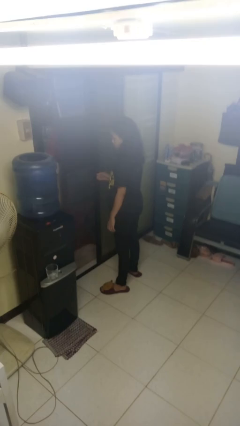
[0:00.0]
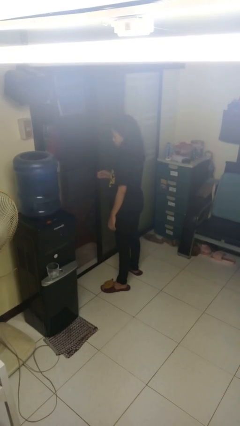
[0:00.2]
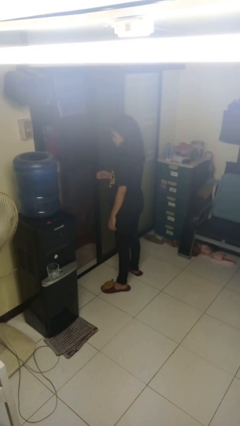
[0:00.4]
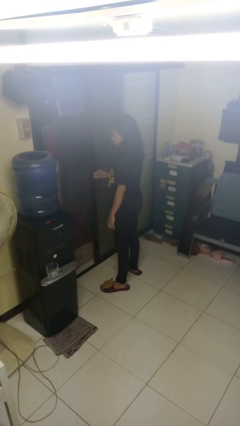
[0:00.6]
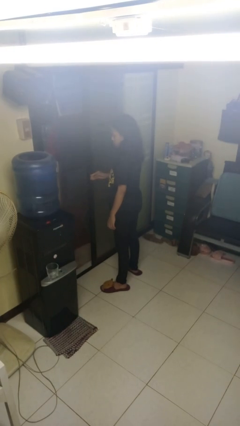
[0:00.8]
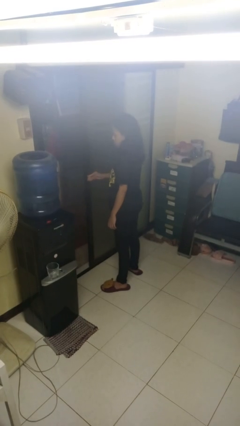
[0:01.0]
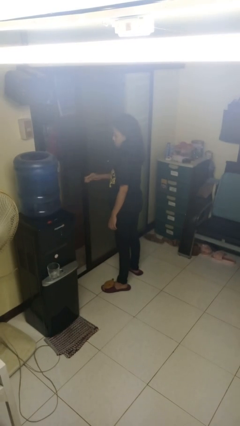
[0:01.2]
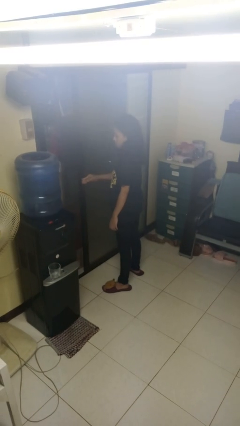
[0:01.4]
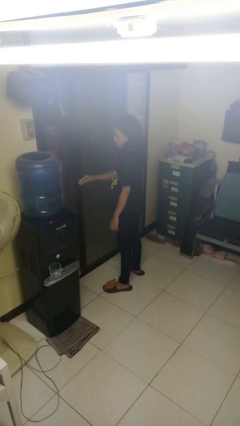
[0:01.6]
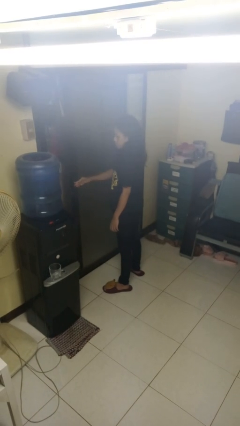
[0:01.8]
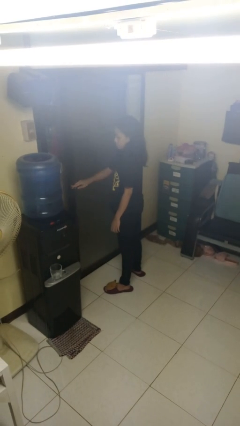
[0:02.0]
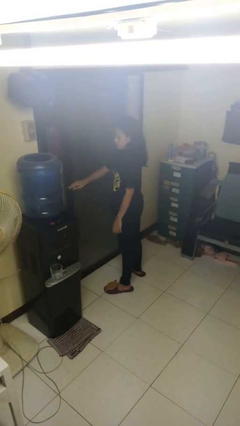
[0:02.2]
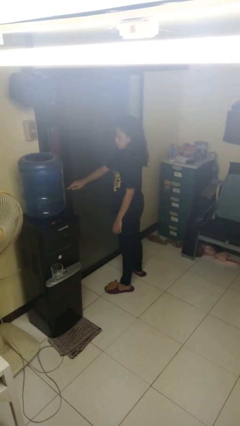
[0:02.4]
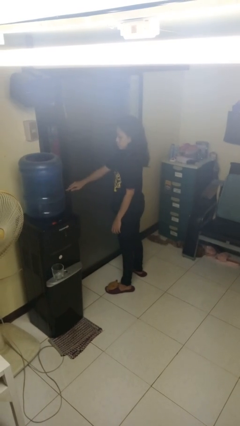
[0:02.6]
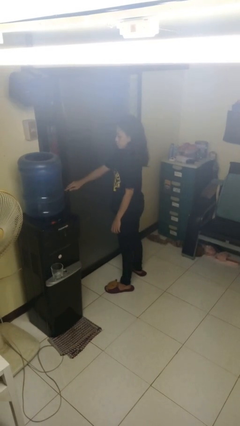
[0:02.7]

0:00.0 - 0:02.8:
person closes sliding door

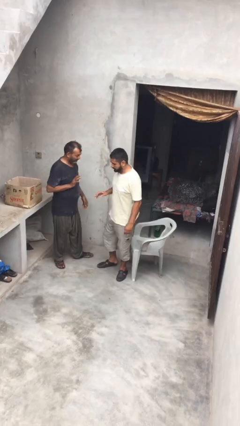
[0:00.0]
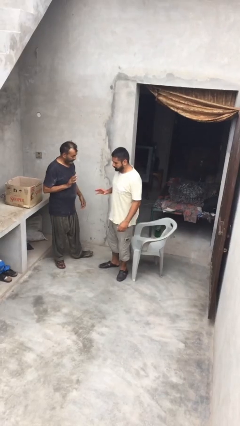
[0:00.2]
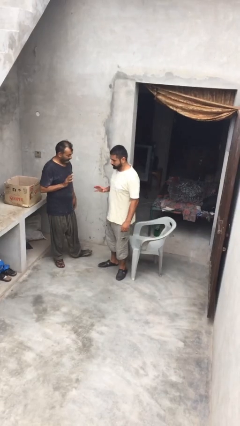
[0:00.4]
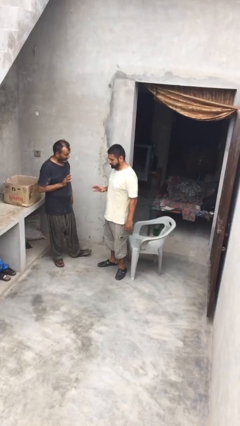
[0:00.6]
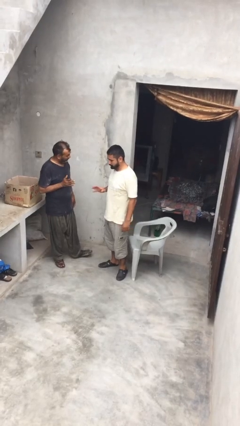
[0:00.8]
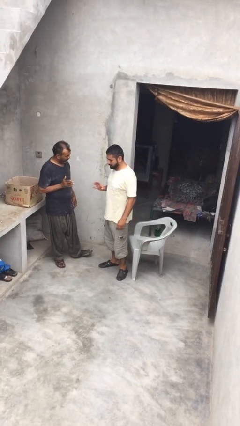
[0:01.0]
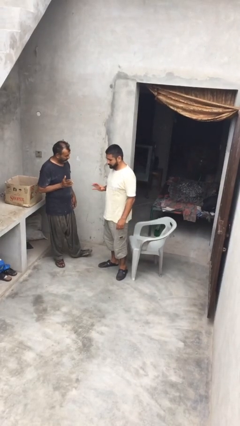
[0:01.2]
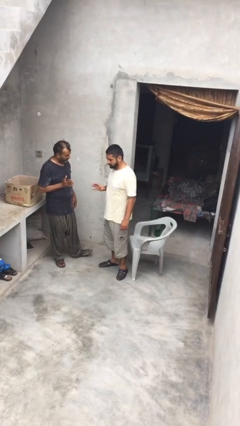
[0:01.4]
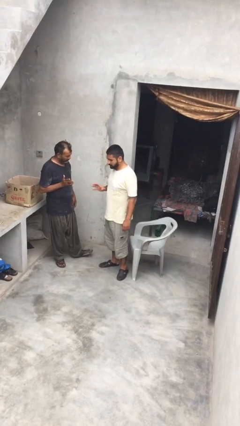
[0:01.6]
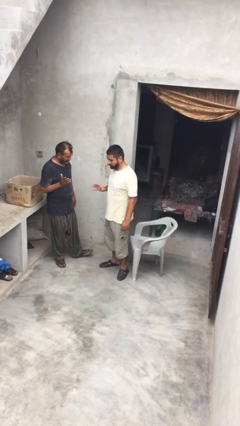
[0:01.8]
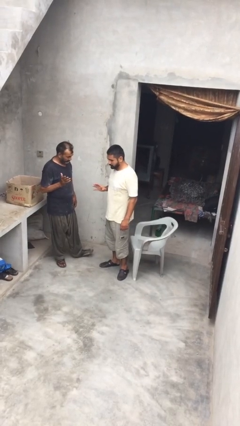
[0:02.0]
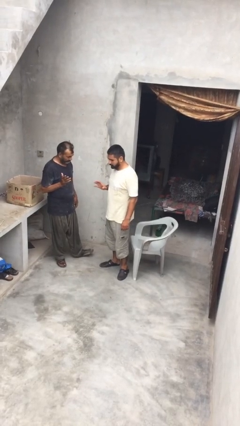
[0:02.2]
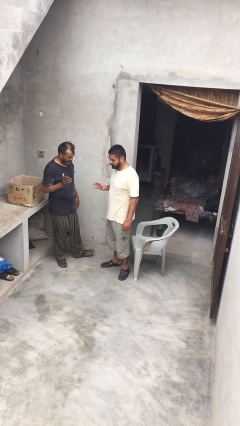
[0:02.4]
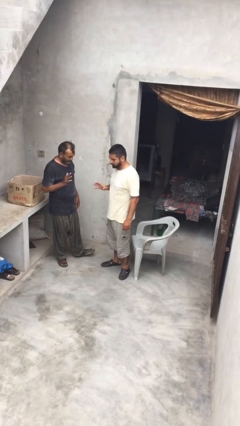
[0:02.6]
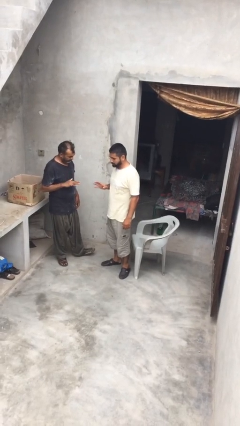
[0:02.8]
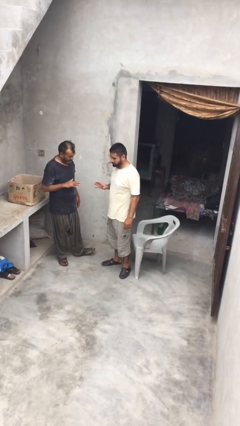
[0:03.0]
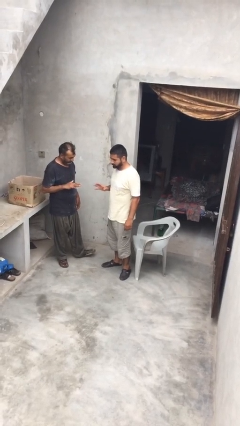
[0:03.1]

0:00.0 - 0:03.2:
person talks to person

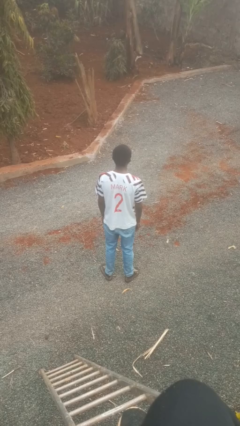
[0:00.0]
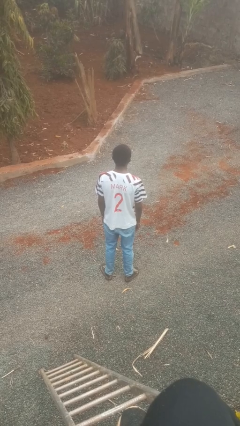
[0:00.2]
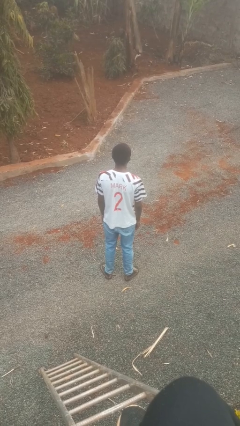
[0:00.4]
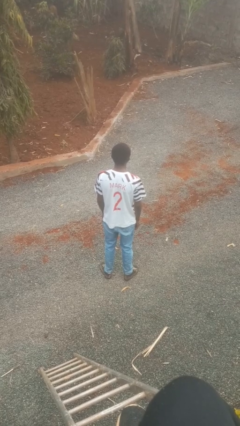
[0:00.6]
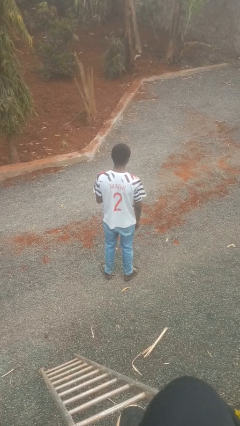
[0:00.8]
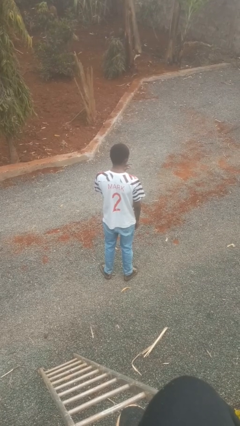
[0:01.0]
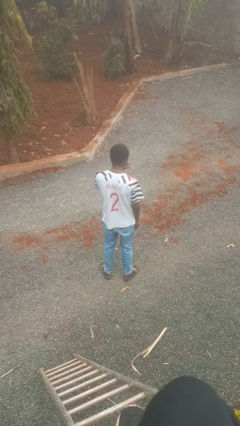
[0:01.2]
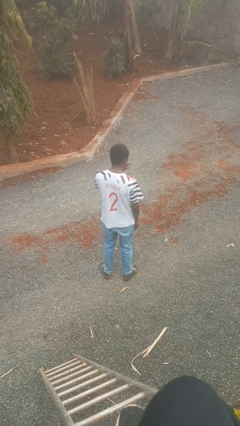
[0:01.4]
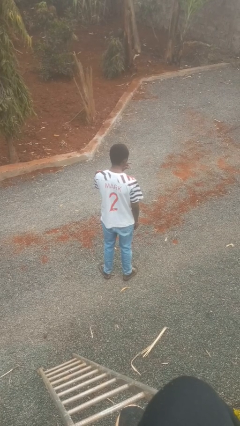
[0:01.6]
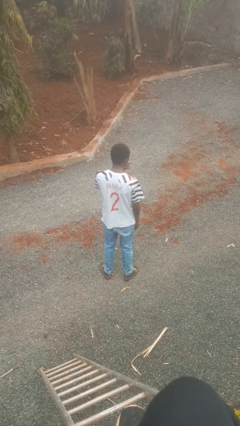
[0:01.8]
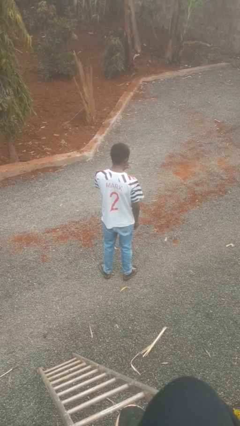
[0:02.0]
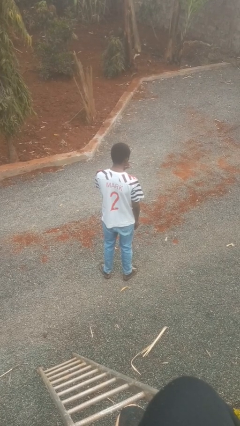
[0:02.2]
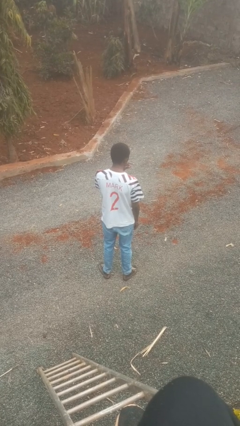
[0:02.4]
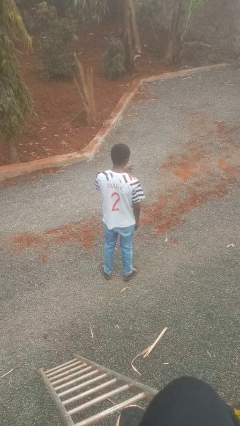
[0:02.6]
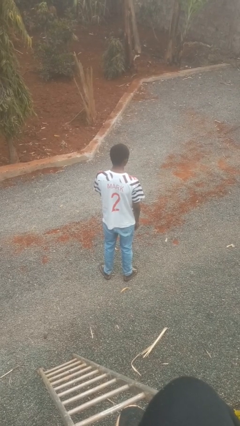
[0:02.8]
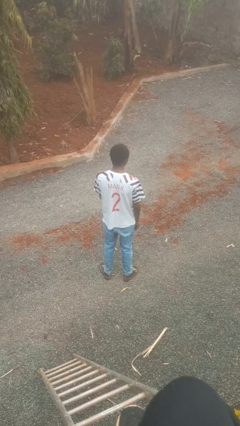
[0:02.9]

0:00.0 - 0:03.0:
person gestures be quiet

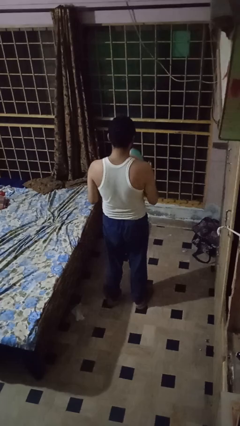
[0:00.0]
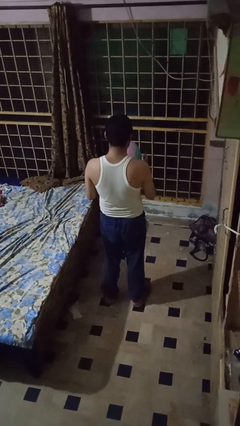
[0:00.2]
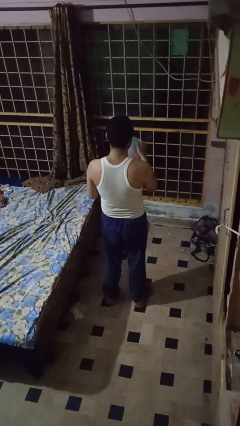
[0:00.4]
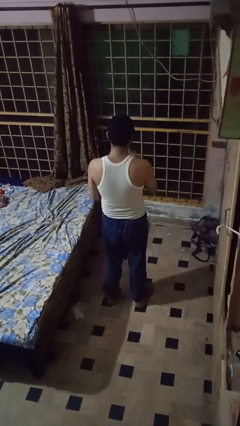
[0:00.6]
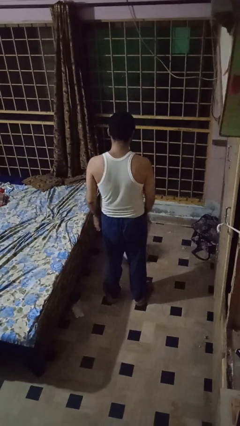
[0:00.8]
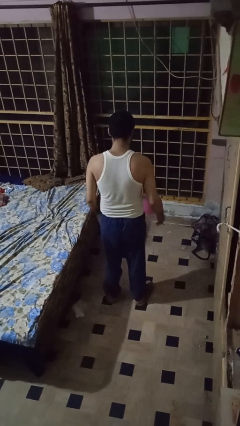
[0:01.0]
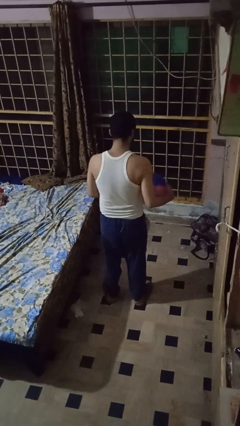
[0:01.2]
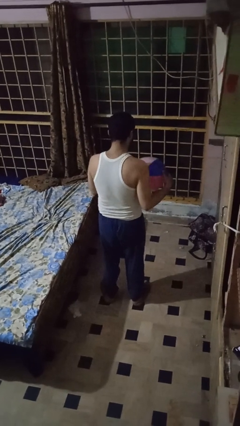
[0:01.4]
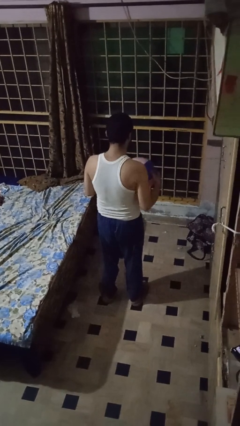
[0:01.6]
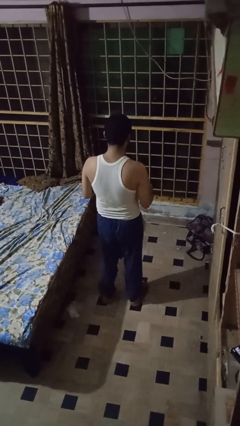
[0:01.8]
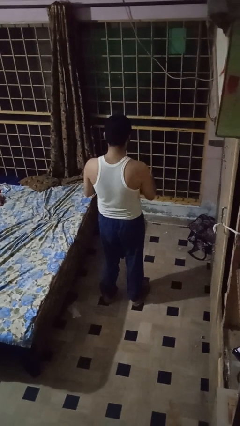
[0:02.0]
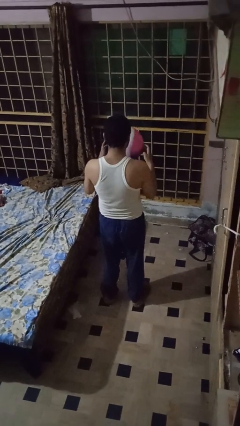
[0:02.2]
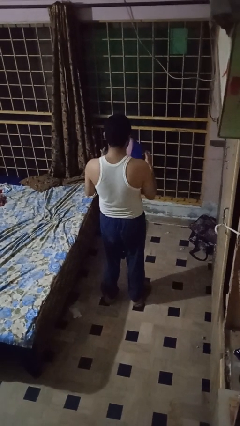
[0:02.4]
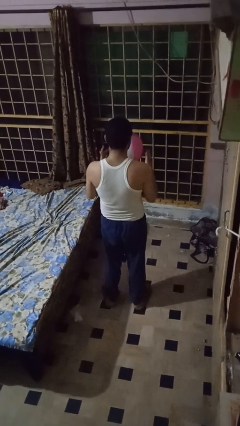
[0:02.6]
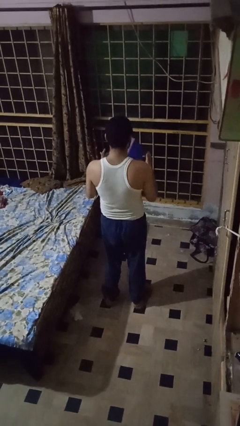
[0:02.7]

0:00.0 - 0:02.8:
person bounces ball on floor

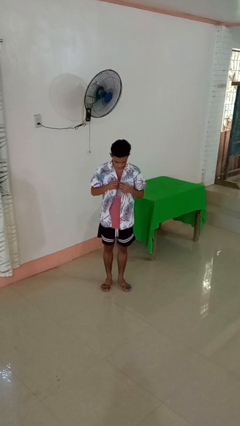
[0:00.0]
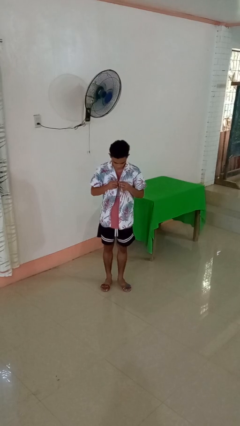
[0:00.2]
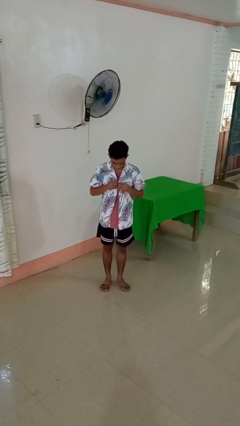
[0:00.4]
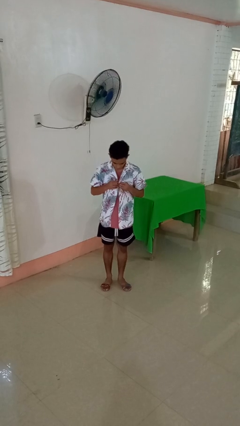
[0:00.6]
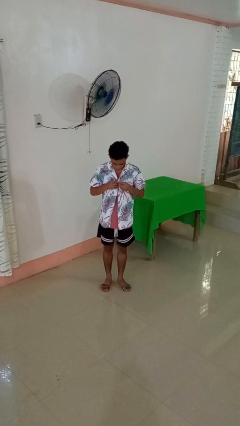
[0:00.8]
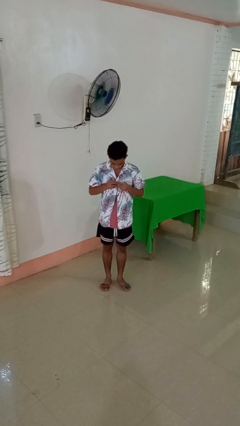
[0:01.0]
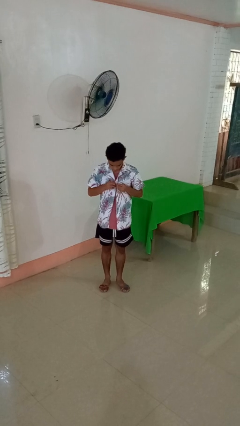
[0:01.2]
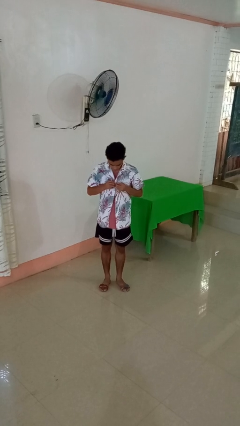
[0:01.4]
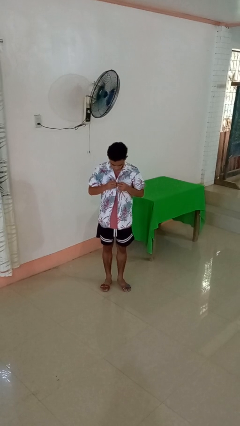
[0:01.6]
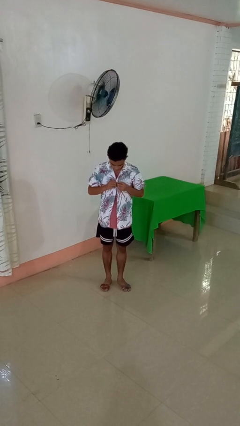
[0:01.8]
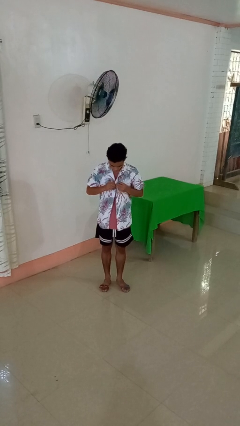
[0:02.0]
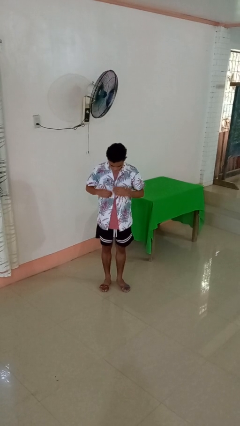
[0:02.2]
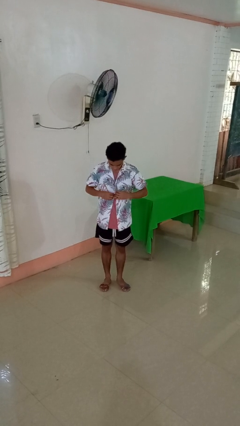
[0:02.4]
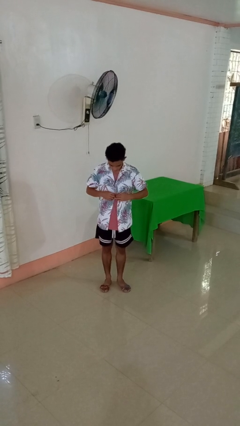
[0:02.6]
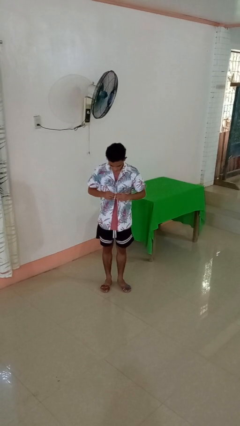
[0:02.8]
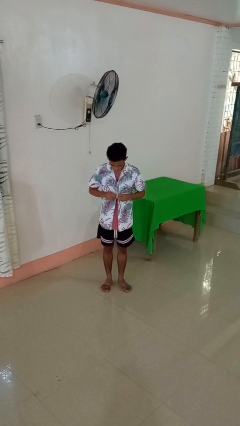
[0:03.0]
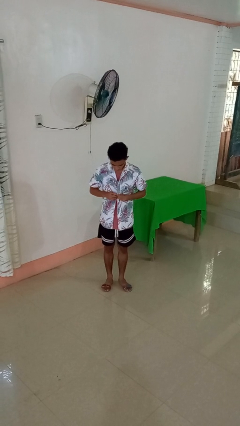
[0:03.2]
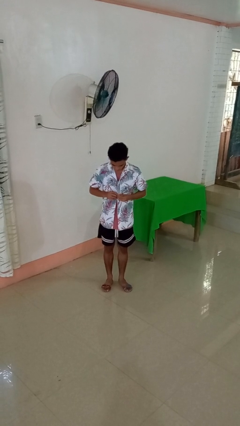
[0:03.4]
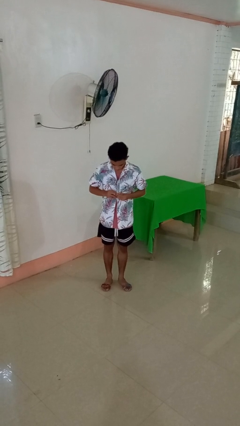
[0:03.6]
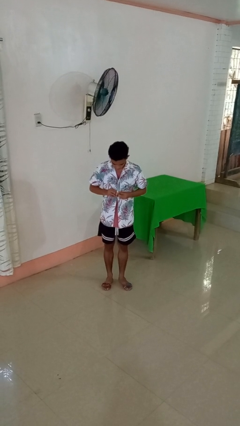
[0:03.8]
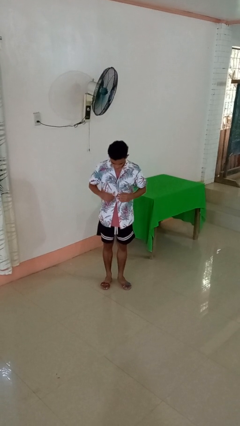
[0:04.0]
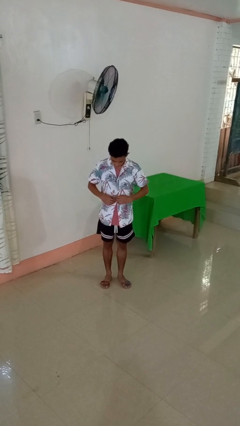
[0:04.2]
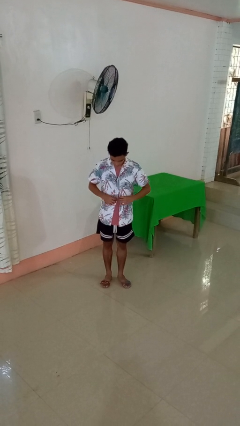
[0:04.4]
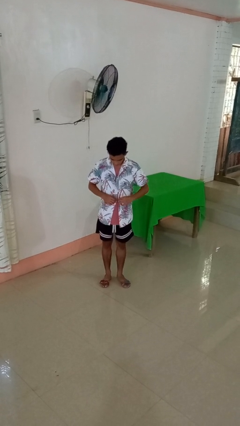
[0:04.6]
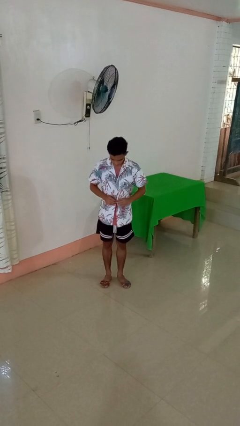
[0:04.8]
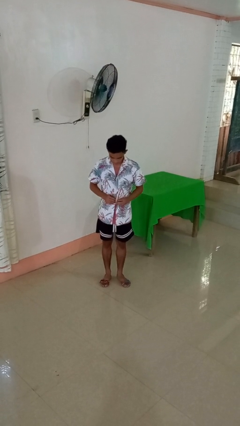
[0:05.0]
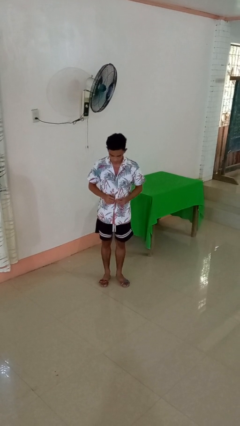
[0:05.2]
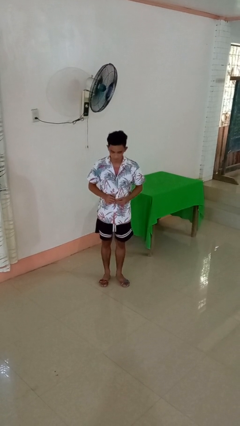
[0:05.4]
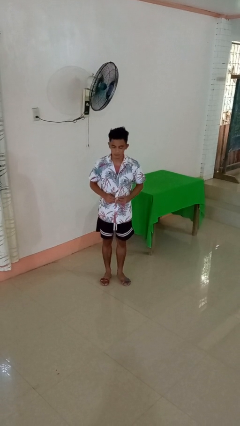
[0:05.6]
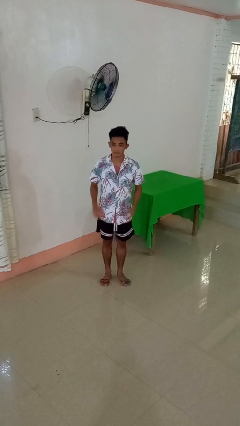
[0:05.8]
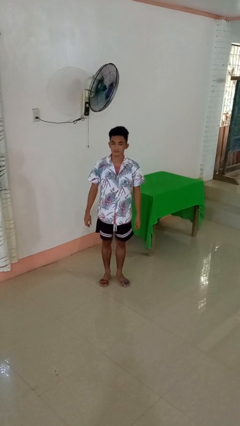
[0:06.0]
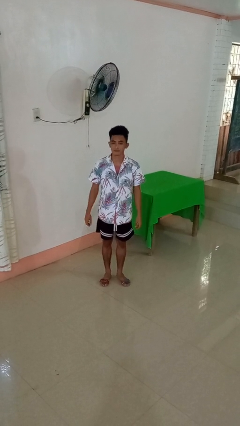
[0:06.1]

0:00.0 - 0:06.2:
person buttons shirt
